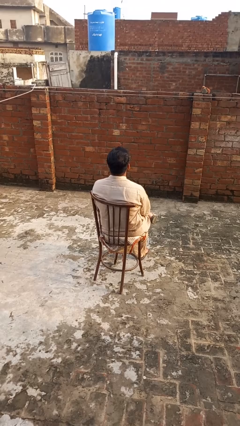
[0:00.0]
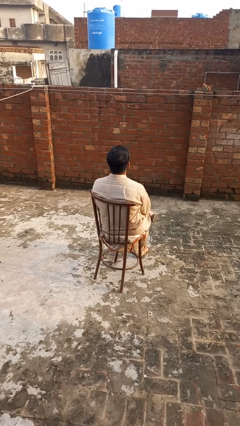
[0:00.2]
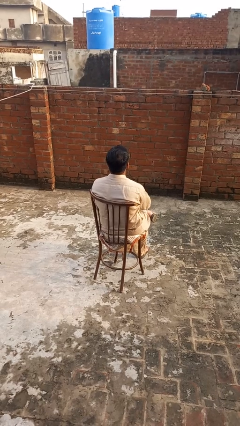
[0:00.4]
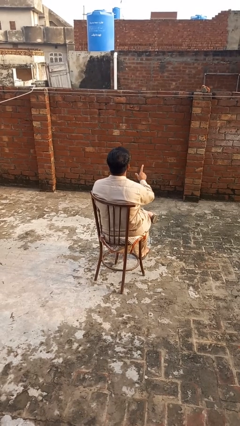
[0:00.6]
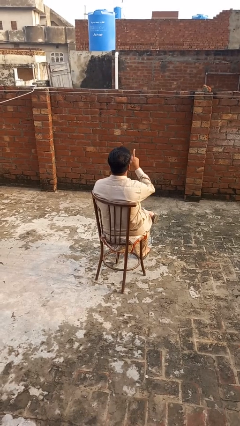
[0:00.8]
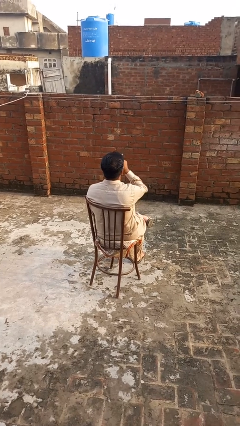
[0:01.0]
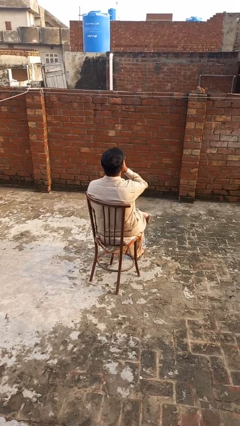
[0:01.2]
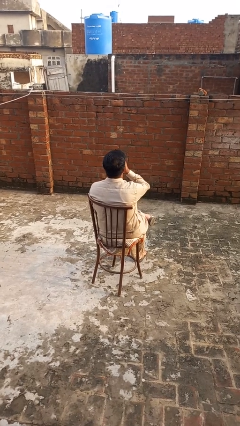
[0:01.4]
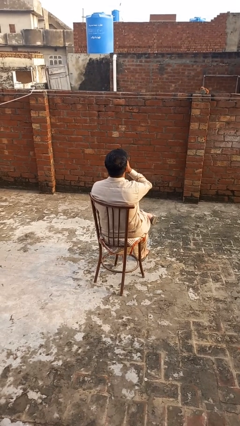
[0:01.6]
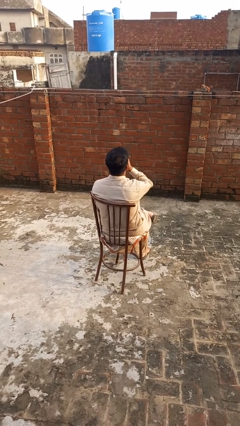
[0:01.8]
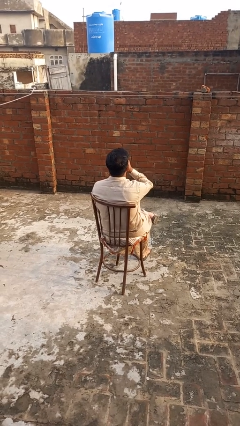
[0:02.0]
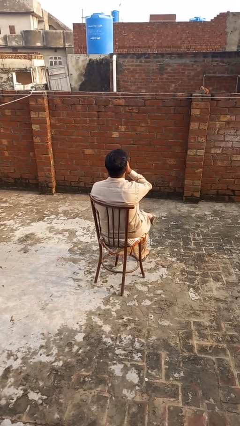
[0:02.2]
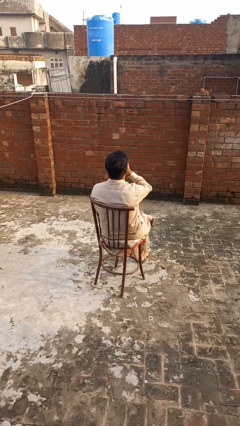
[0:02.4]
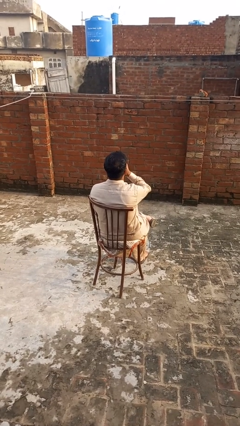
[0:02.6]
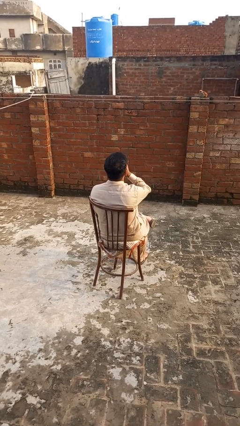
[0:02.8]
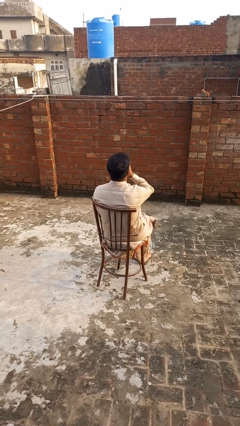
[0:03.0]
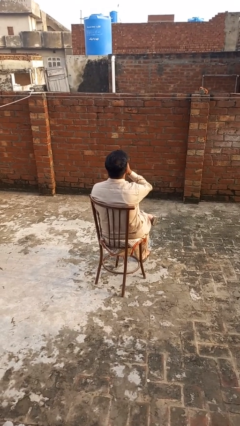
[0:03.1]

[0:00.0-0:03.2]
person gestures be quiet

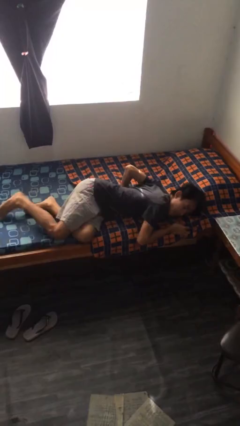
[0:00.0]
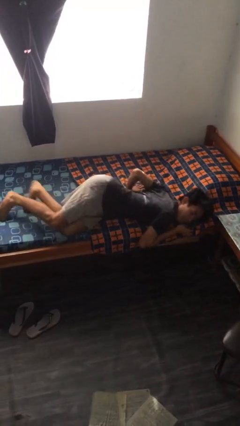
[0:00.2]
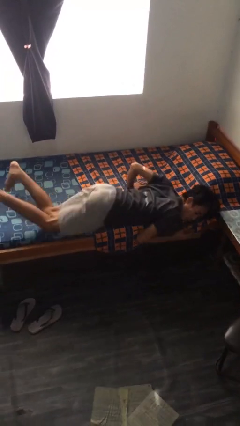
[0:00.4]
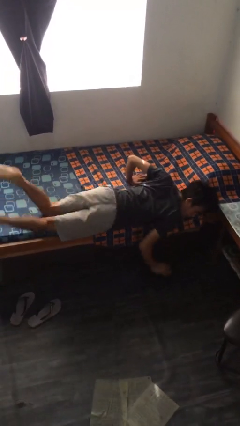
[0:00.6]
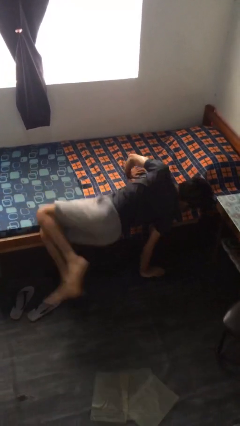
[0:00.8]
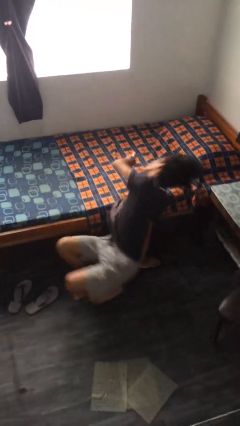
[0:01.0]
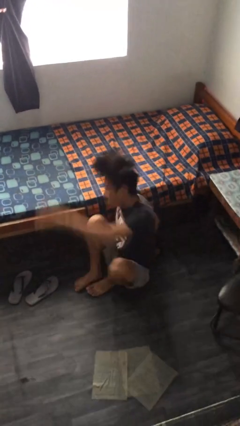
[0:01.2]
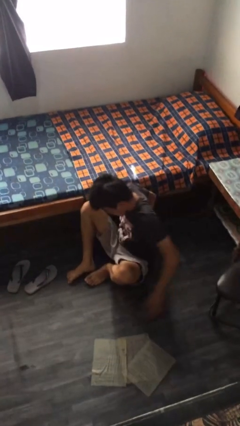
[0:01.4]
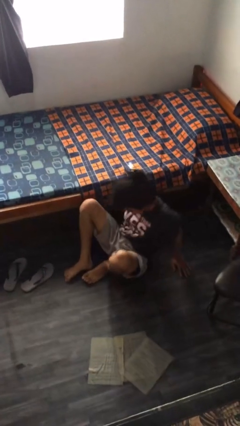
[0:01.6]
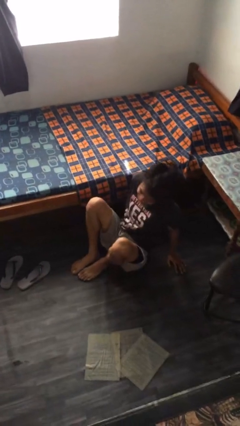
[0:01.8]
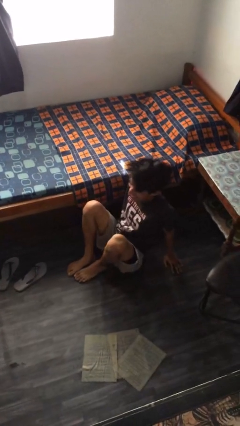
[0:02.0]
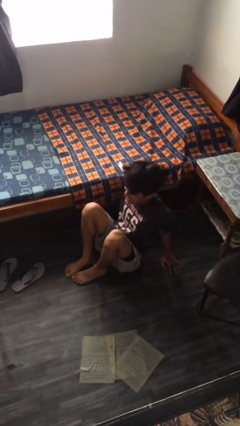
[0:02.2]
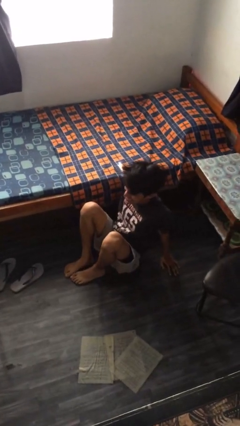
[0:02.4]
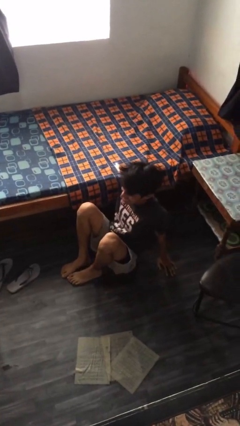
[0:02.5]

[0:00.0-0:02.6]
person falls from bed

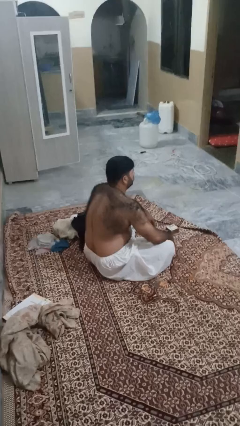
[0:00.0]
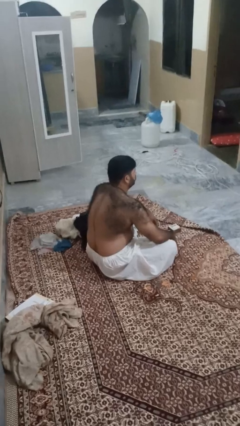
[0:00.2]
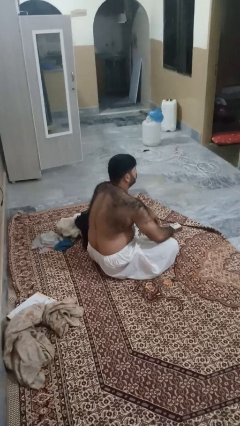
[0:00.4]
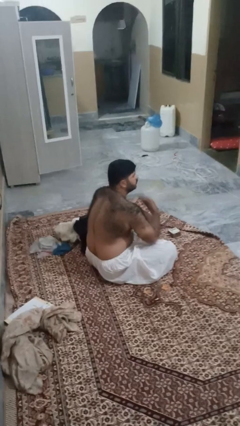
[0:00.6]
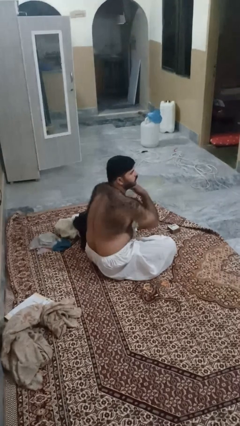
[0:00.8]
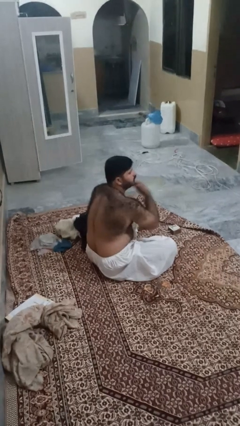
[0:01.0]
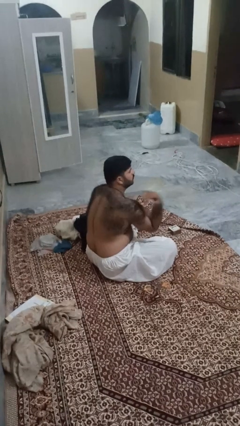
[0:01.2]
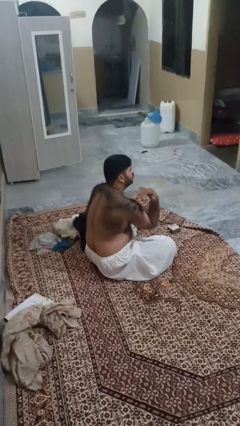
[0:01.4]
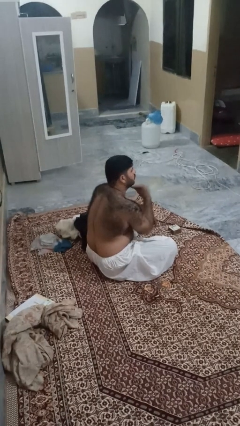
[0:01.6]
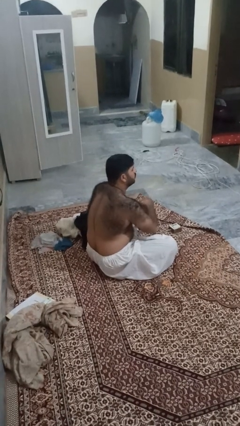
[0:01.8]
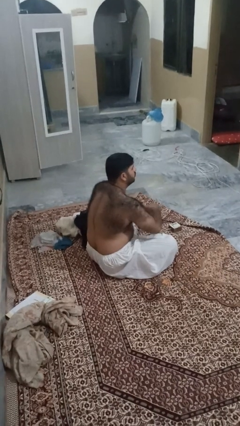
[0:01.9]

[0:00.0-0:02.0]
person gestures cut

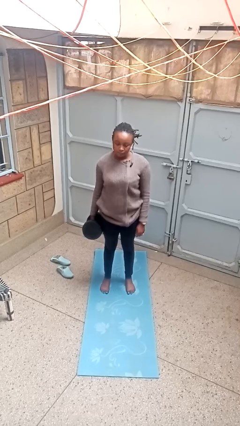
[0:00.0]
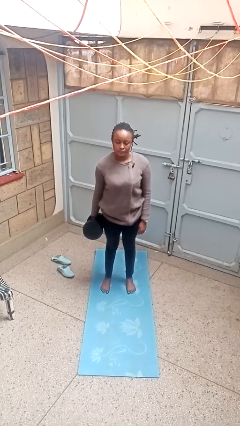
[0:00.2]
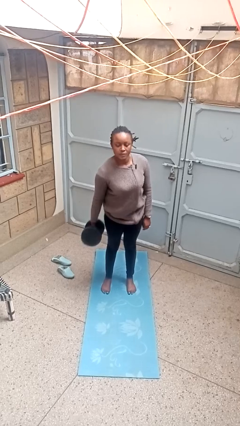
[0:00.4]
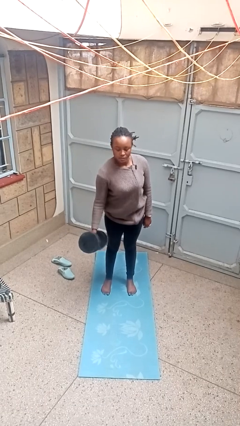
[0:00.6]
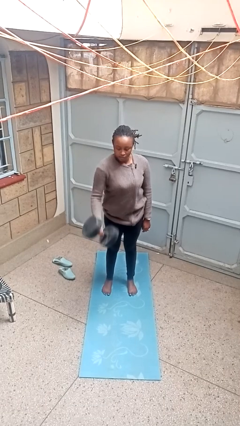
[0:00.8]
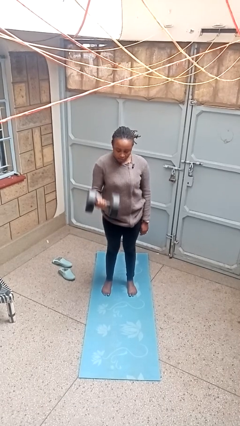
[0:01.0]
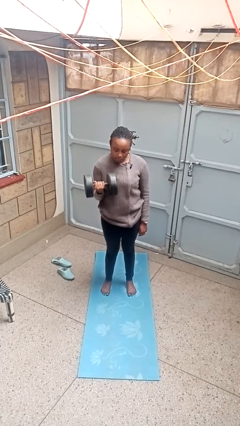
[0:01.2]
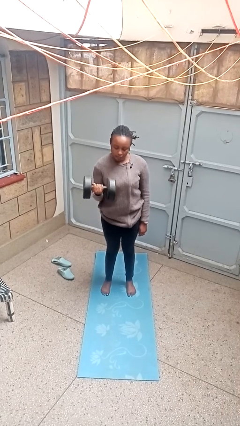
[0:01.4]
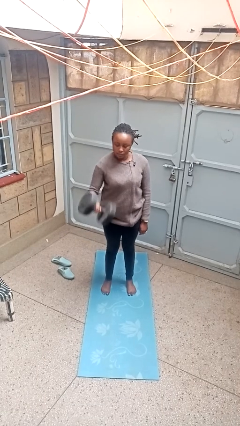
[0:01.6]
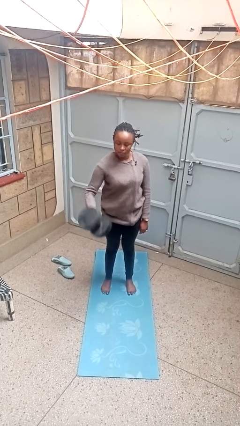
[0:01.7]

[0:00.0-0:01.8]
person lifts dumbbells

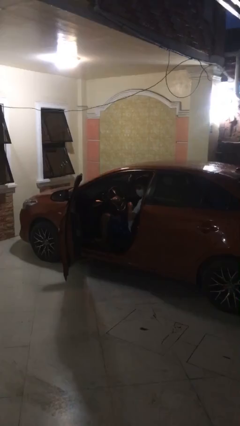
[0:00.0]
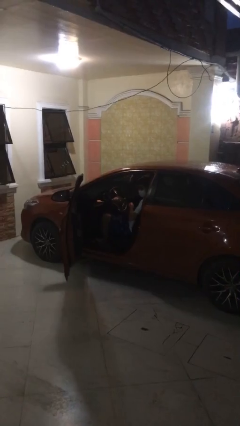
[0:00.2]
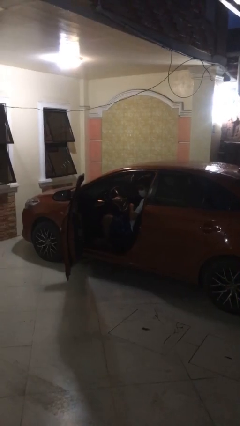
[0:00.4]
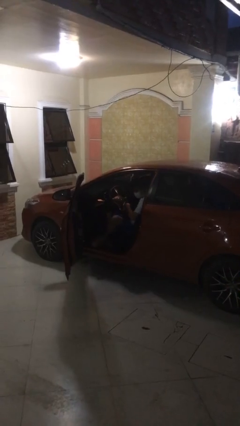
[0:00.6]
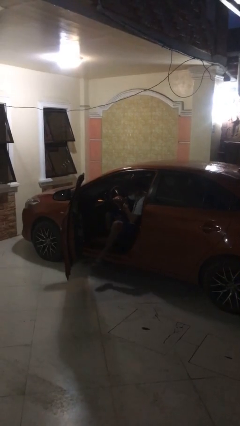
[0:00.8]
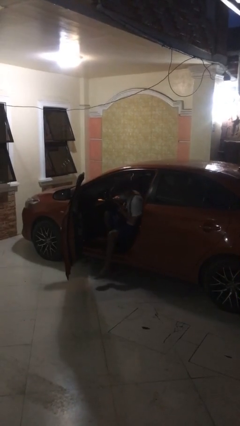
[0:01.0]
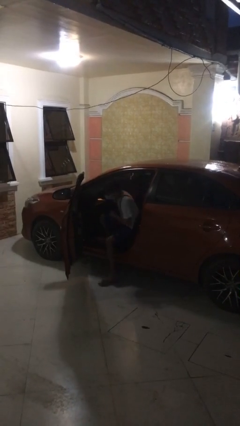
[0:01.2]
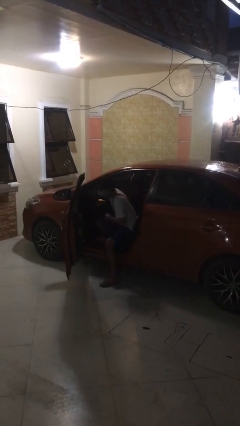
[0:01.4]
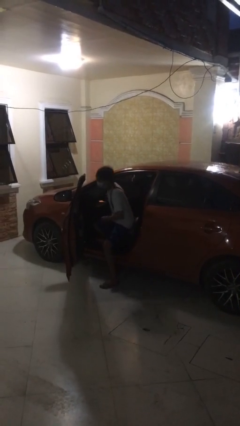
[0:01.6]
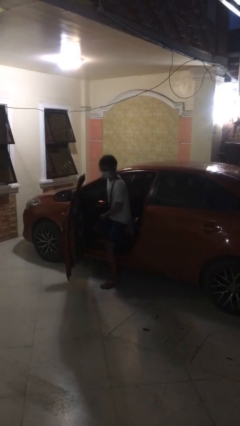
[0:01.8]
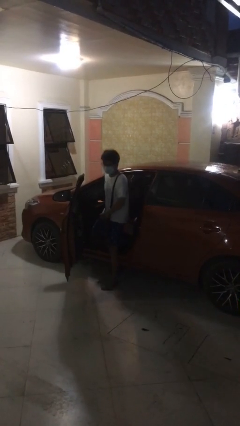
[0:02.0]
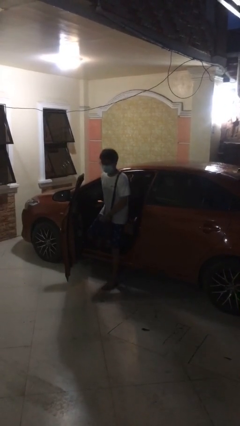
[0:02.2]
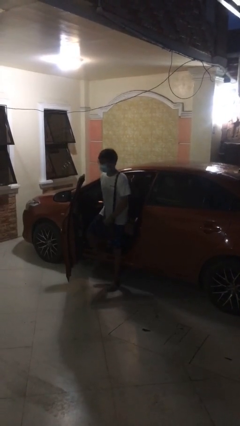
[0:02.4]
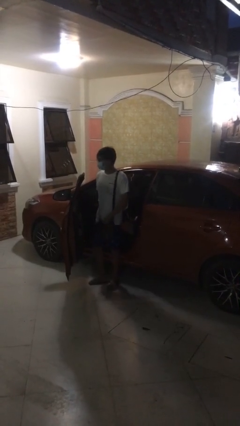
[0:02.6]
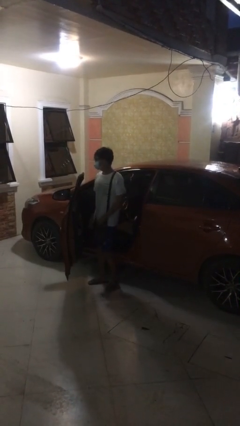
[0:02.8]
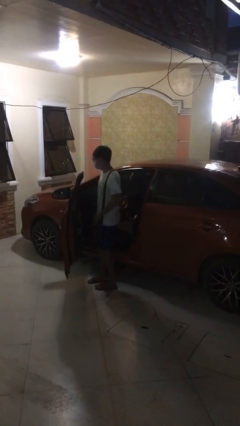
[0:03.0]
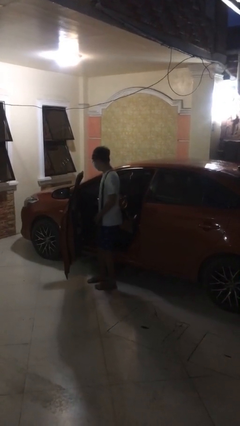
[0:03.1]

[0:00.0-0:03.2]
person exits car

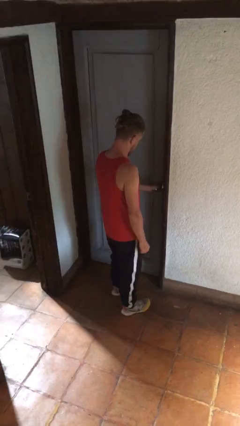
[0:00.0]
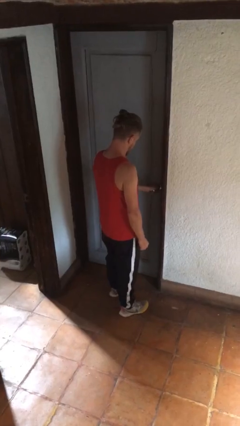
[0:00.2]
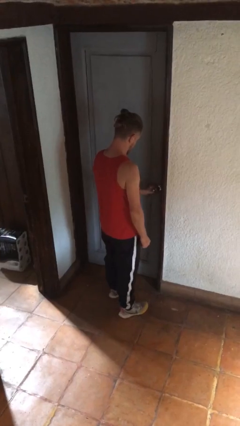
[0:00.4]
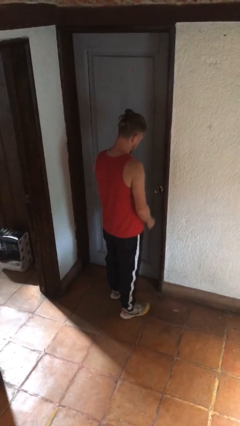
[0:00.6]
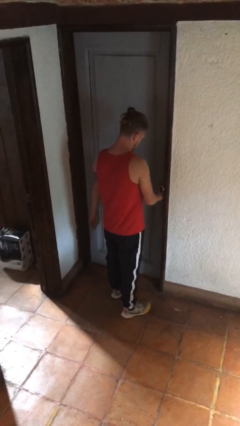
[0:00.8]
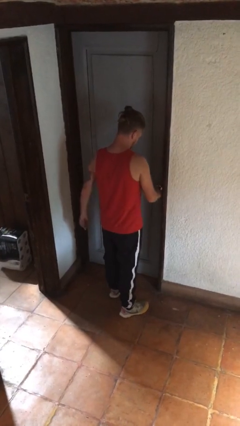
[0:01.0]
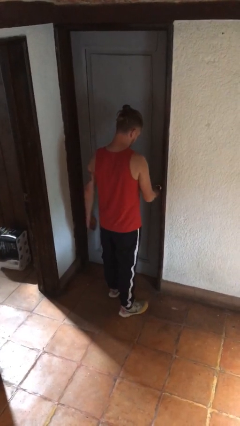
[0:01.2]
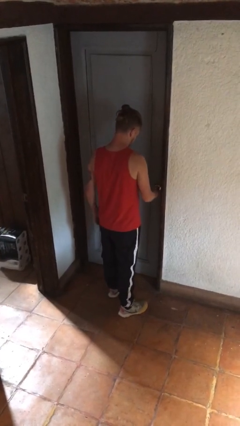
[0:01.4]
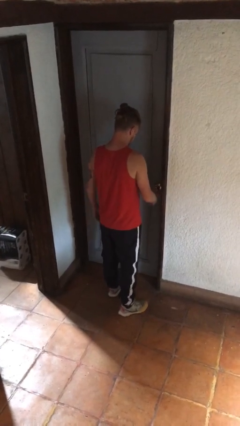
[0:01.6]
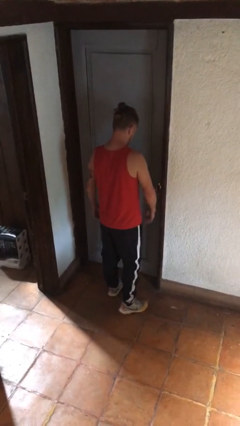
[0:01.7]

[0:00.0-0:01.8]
person locks door with keys

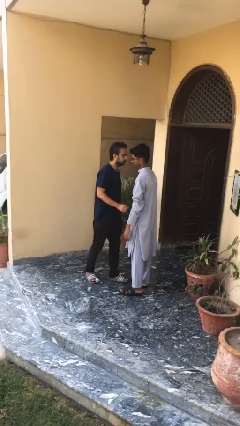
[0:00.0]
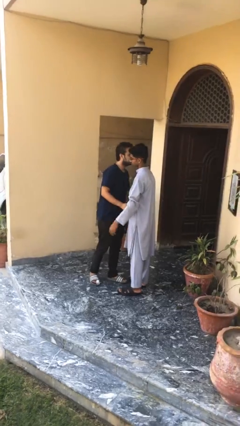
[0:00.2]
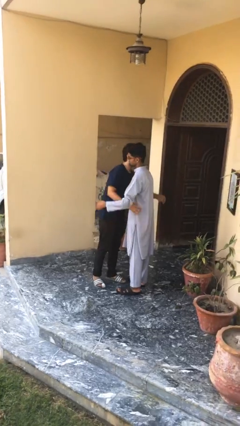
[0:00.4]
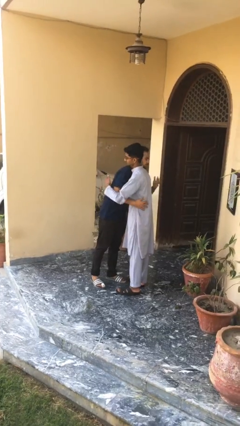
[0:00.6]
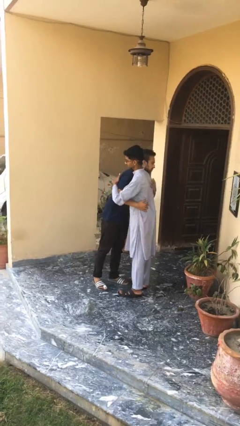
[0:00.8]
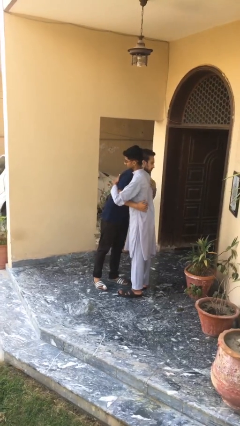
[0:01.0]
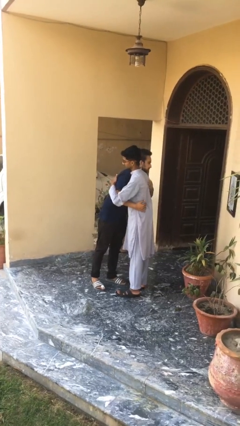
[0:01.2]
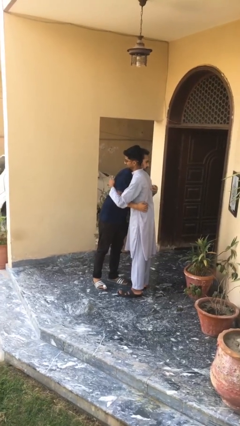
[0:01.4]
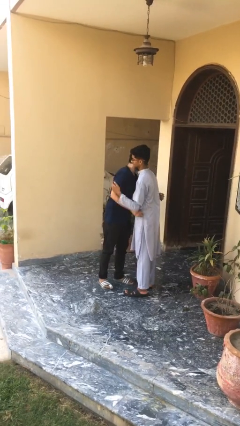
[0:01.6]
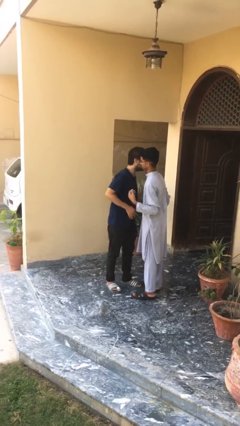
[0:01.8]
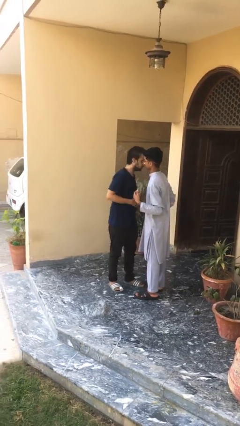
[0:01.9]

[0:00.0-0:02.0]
person embraces person
